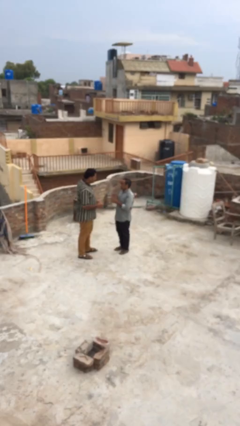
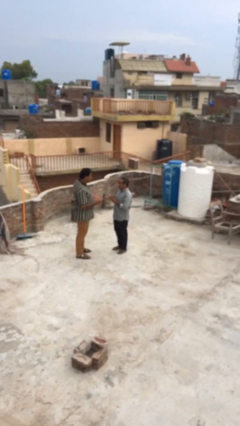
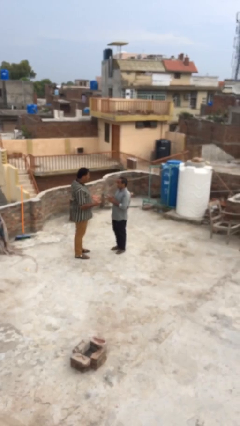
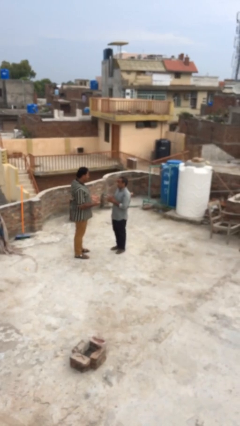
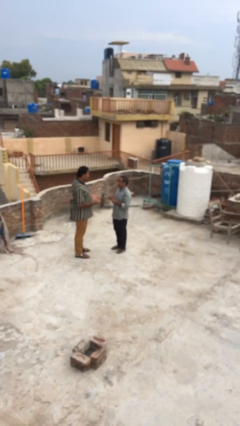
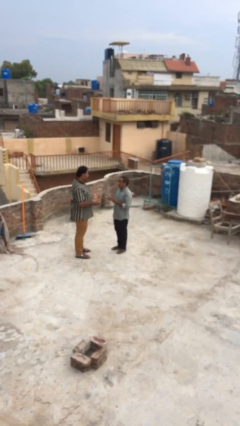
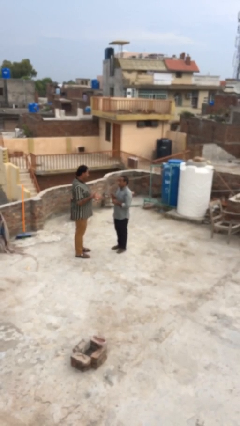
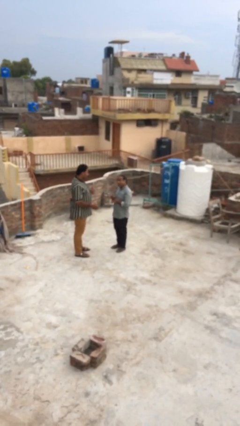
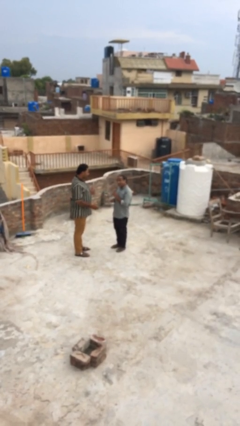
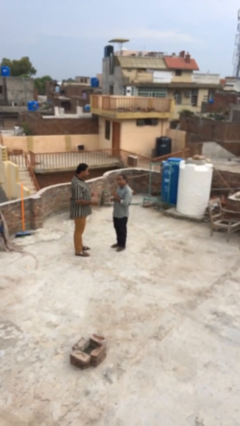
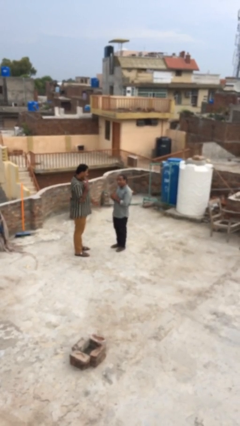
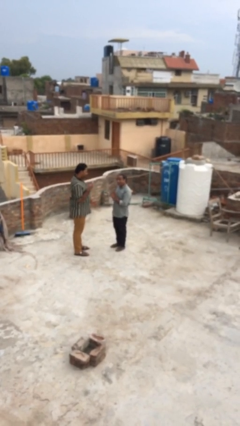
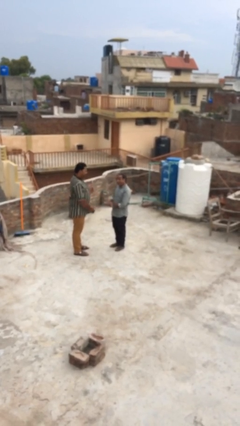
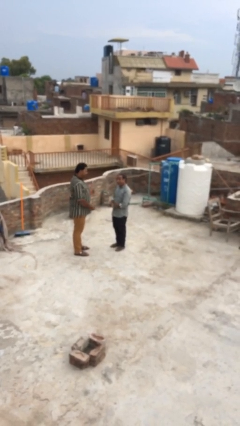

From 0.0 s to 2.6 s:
person talks to person

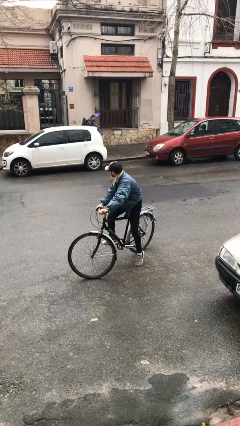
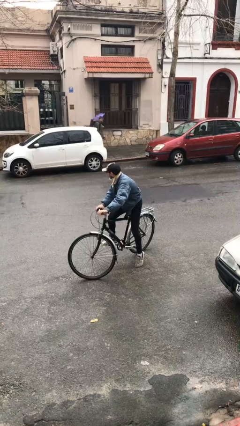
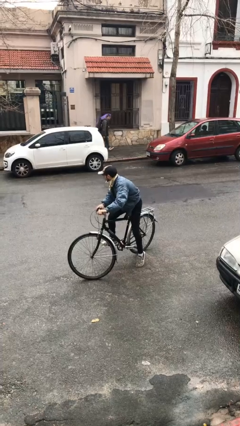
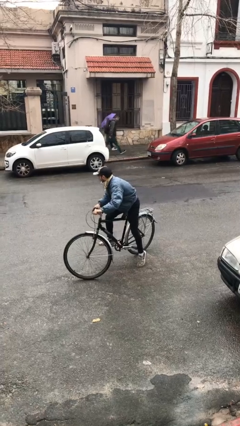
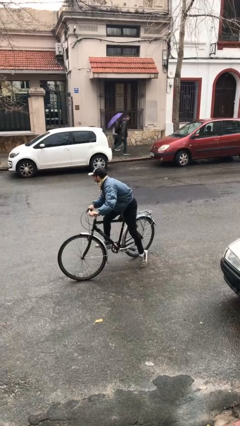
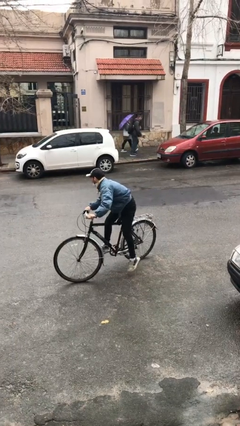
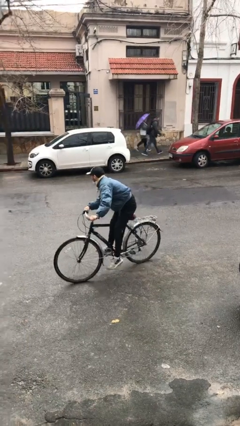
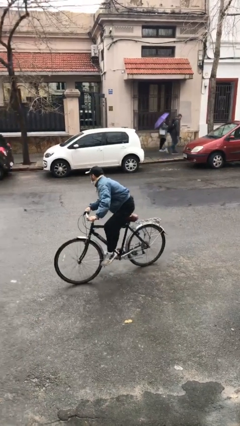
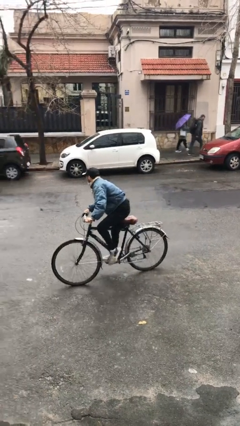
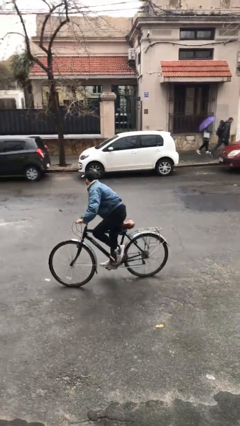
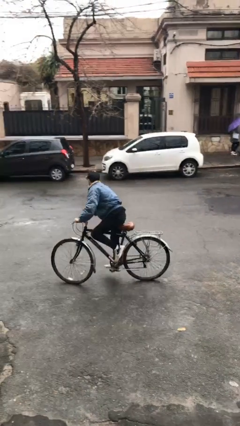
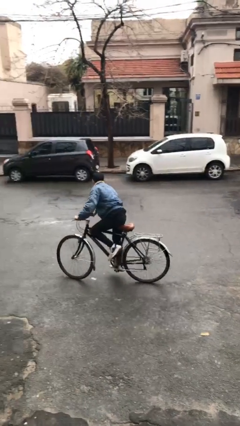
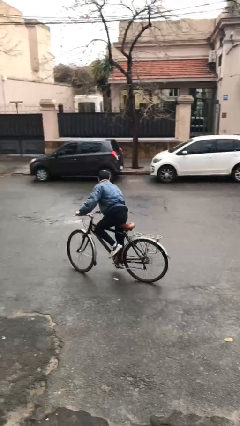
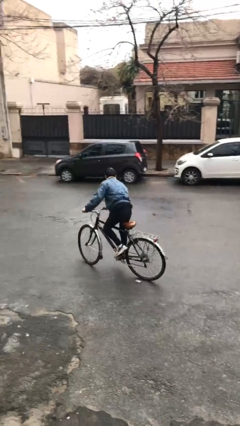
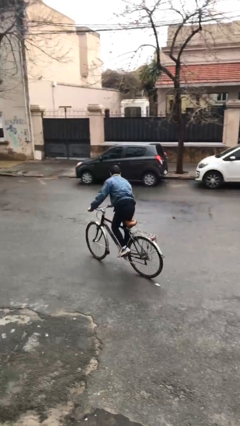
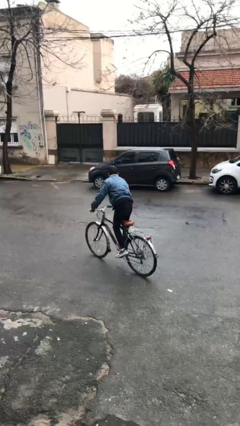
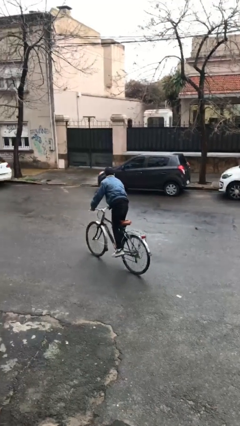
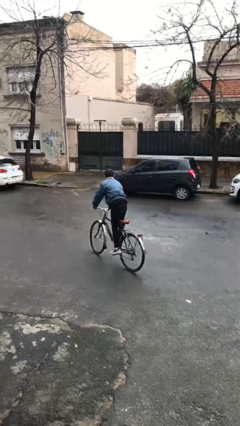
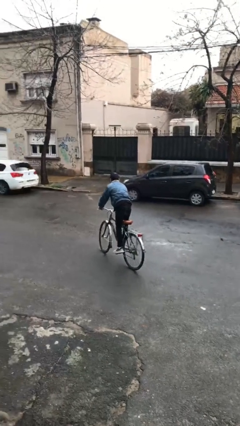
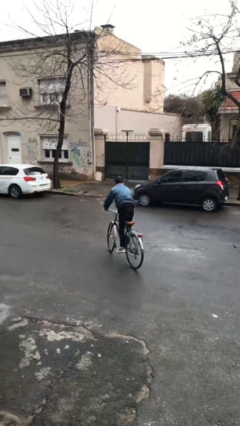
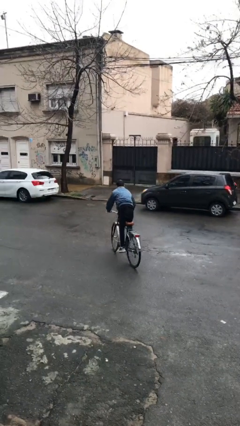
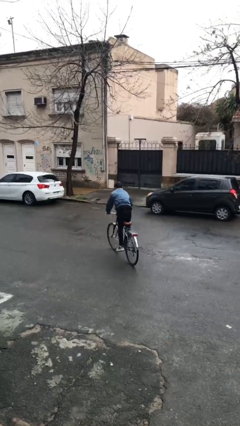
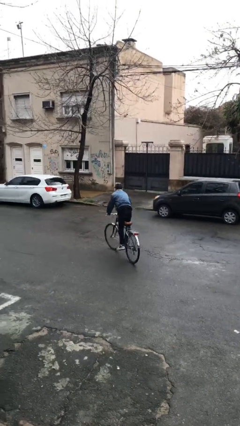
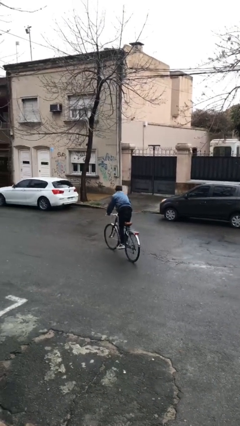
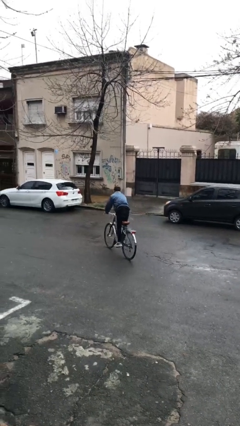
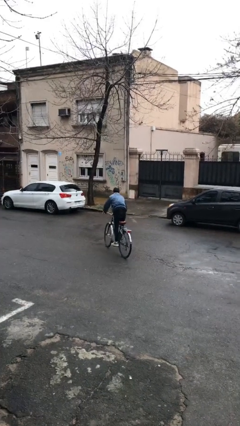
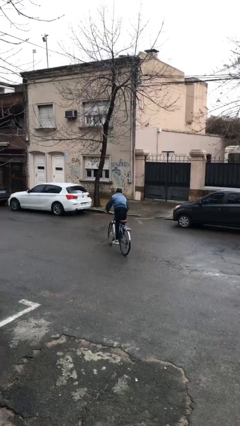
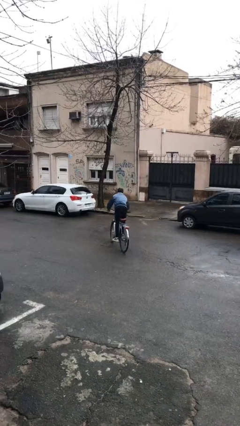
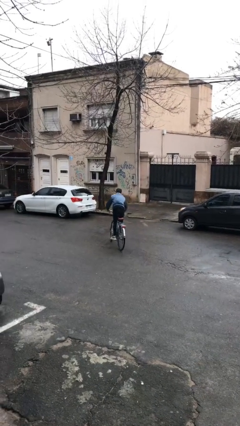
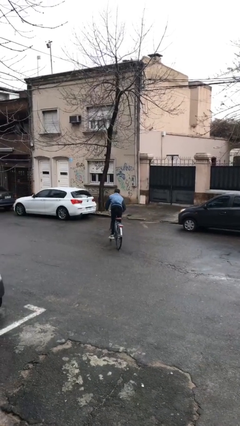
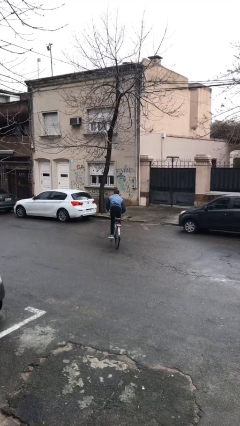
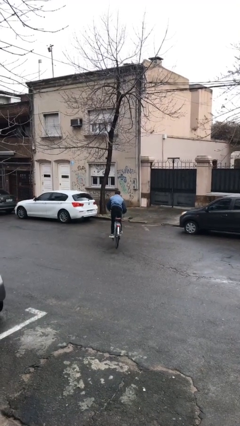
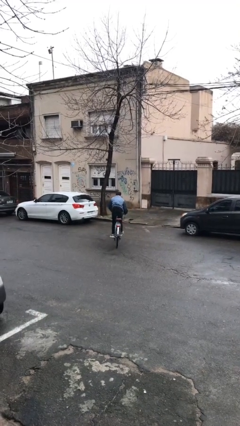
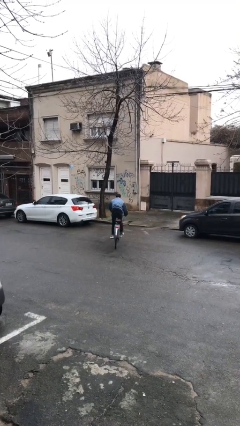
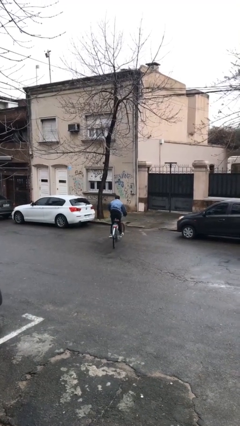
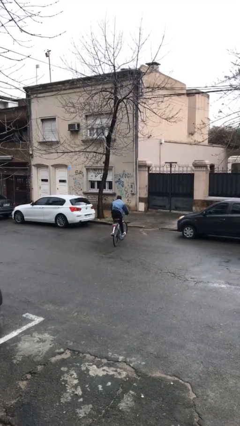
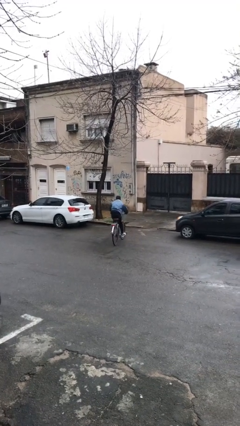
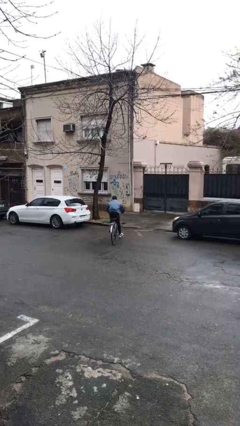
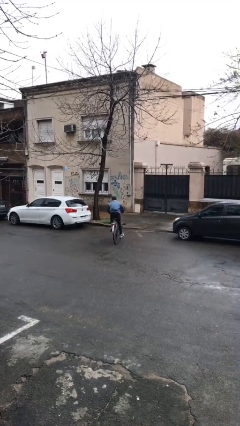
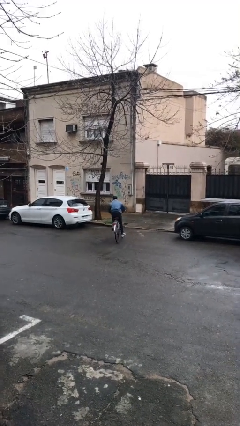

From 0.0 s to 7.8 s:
person rides bicycle

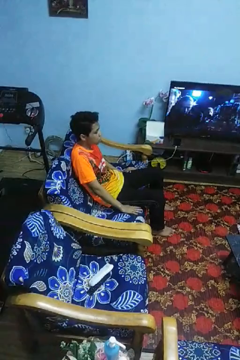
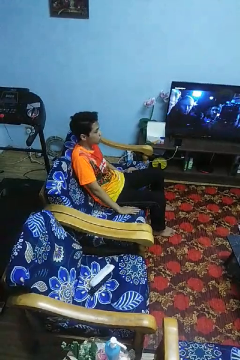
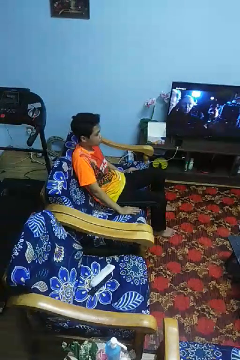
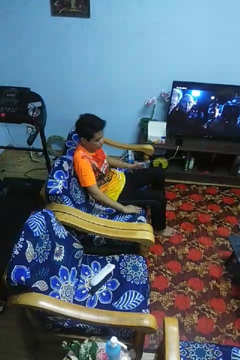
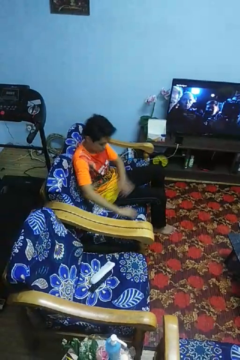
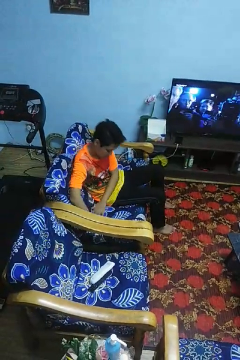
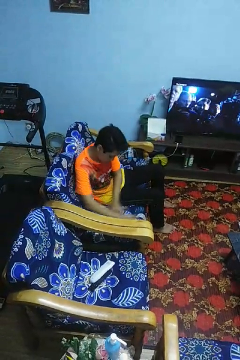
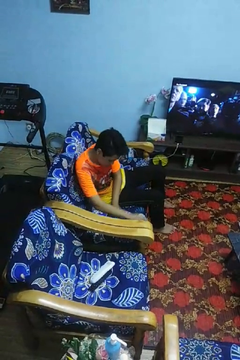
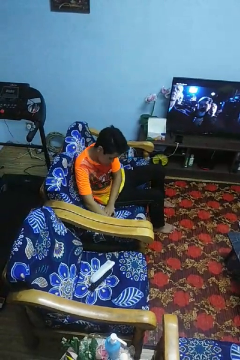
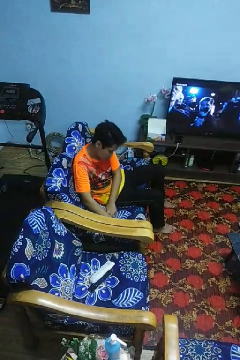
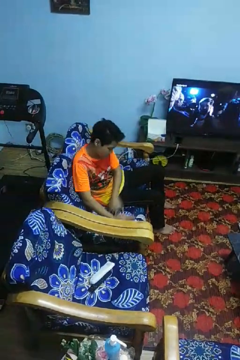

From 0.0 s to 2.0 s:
person searches in couch

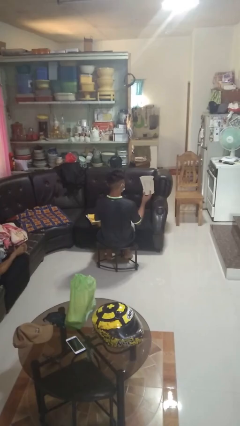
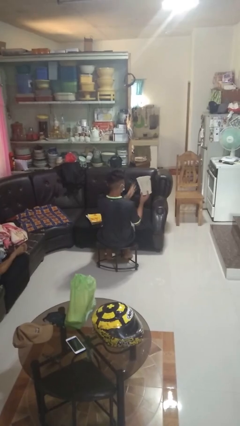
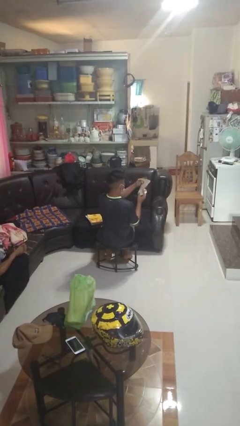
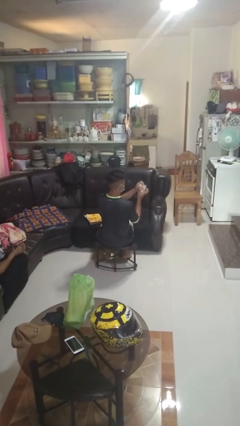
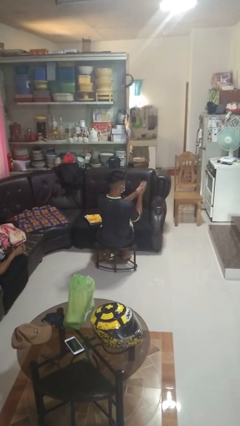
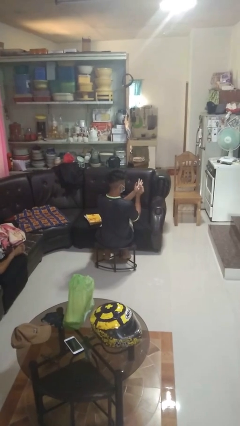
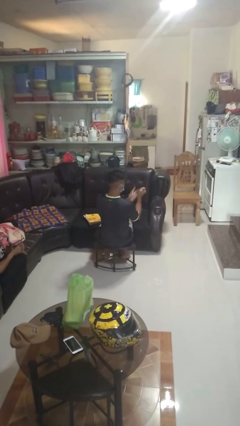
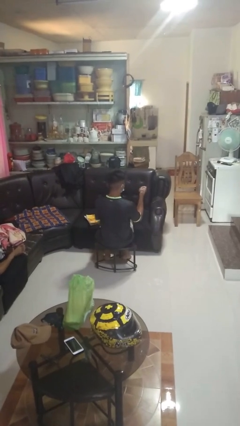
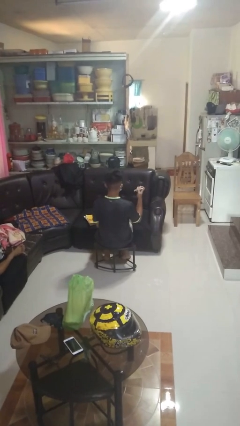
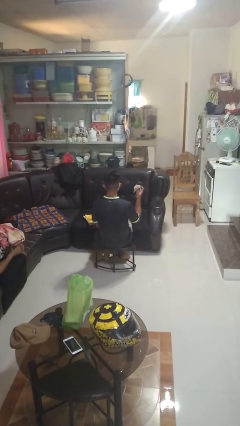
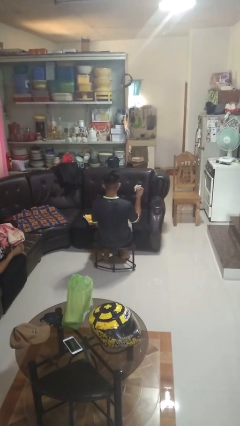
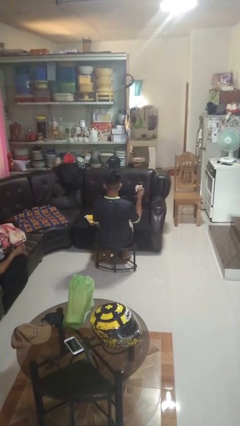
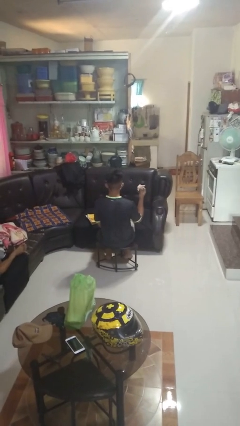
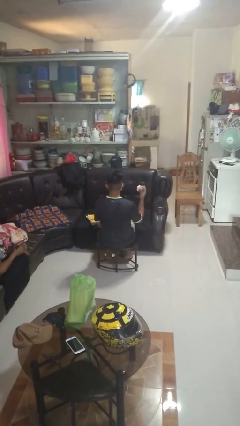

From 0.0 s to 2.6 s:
person crumples paper

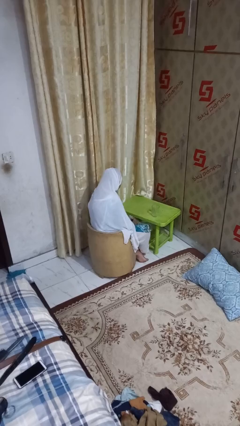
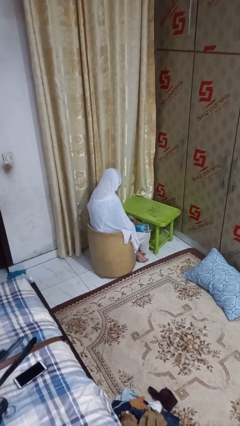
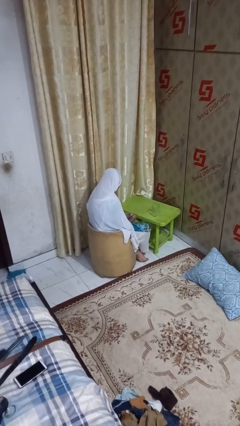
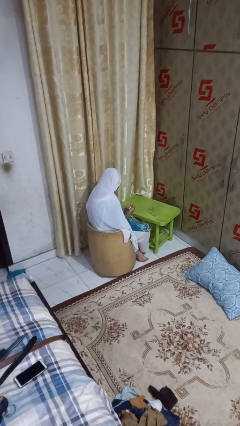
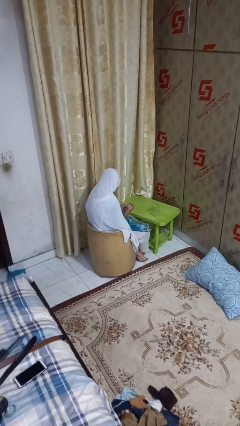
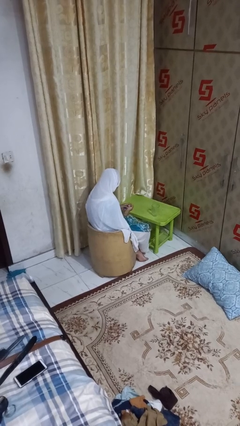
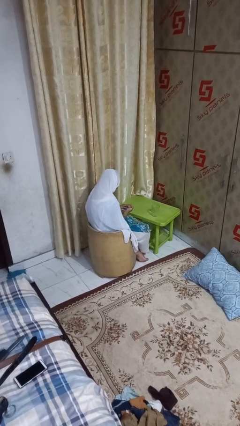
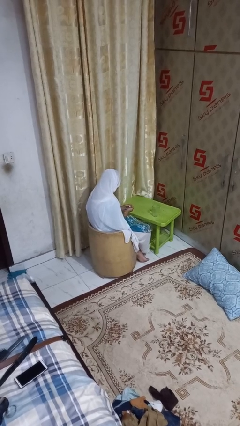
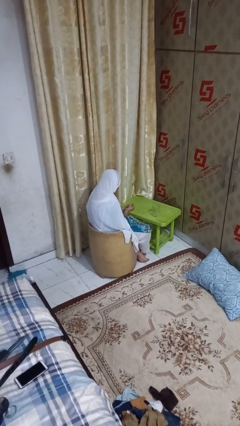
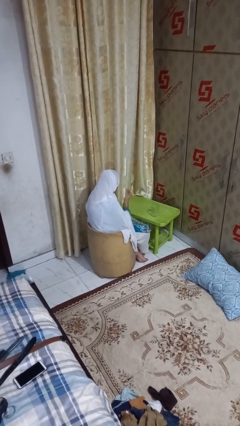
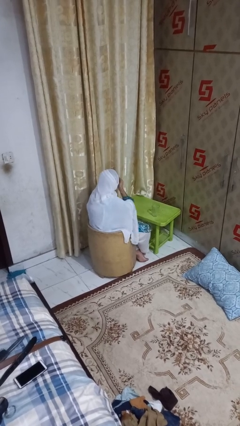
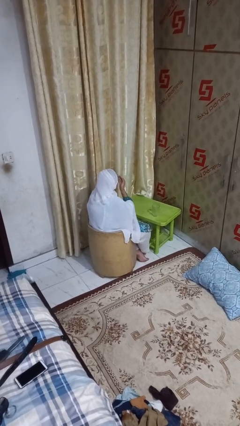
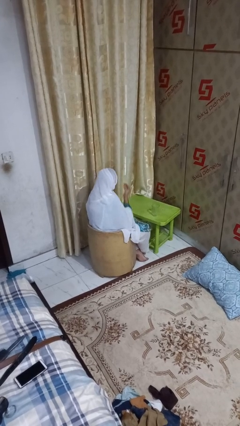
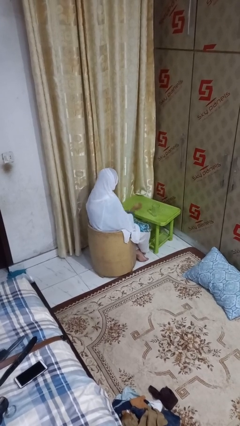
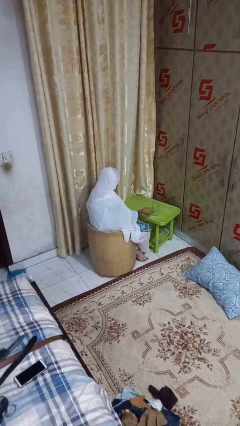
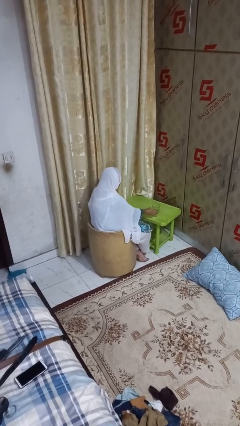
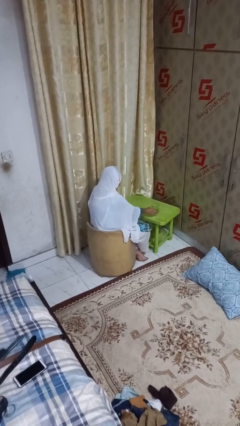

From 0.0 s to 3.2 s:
person takes medicine pills
